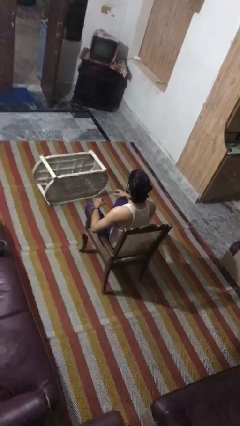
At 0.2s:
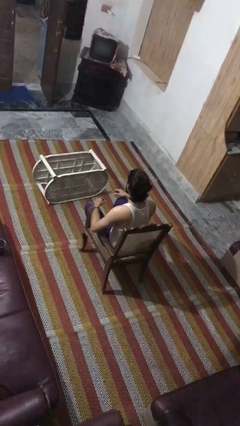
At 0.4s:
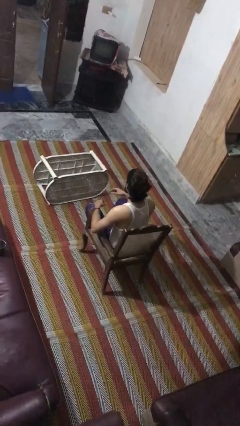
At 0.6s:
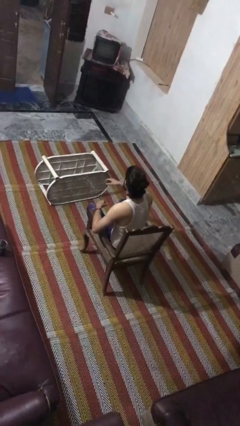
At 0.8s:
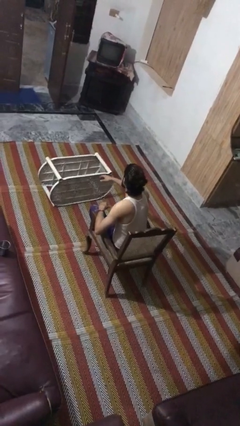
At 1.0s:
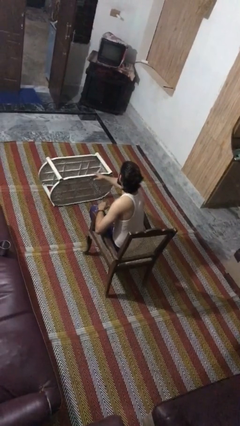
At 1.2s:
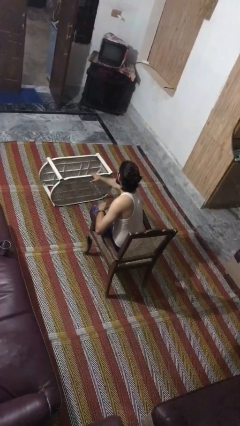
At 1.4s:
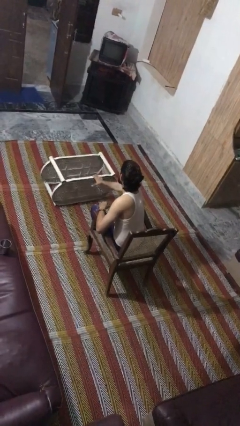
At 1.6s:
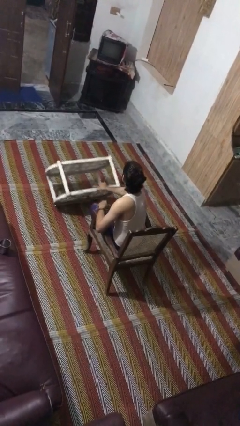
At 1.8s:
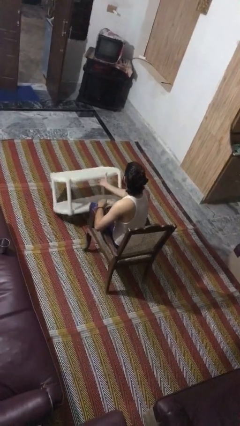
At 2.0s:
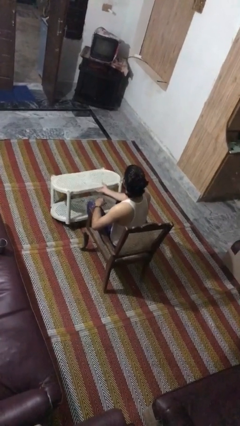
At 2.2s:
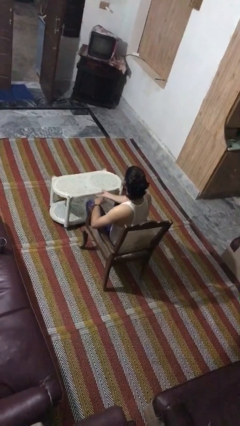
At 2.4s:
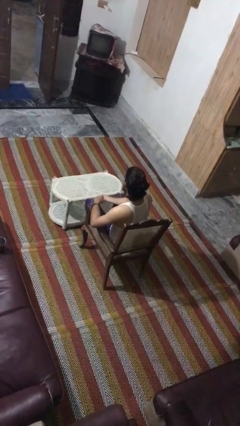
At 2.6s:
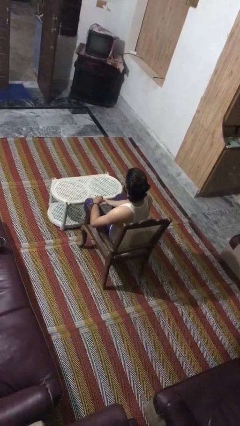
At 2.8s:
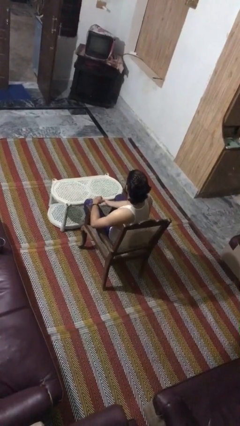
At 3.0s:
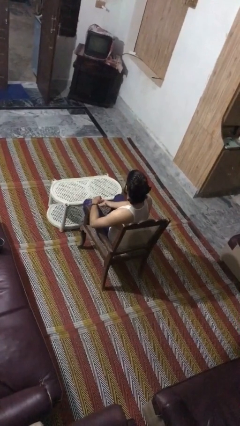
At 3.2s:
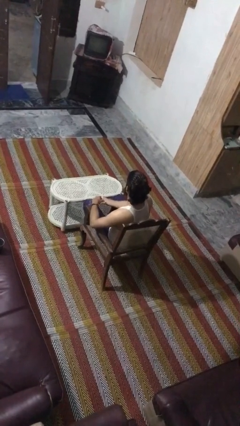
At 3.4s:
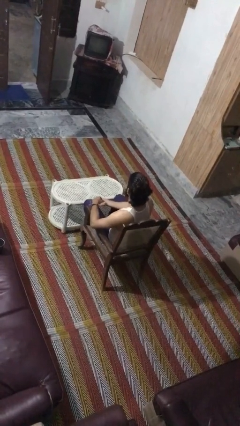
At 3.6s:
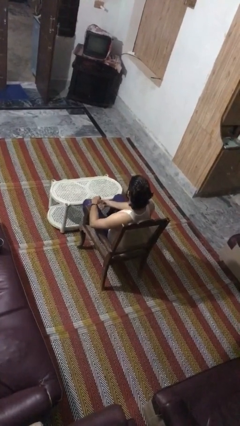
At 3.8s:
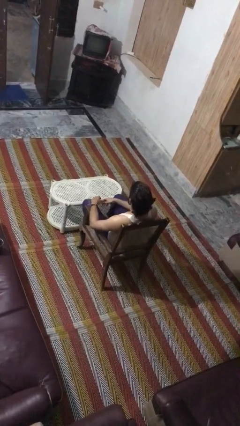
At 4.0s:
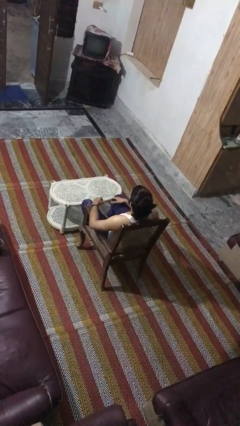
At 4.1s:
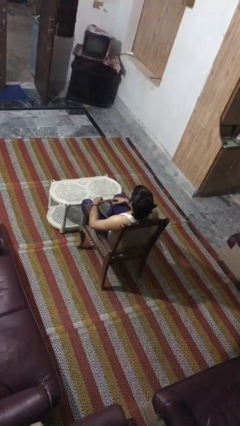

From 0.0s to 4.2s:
person sets upright furniture

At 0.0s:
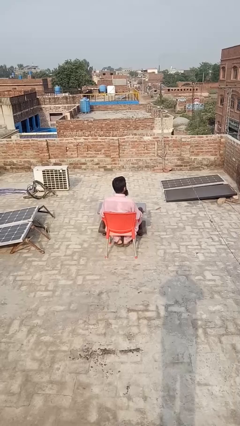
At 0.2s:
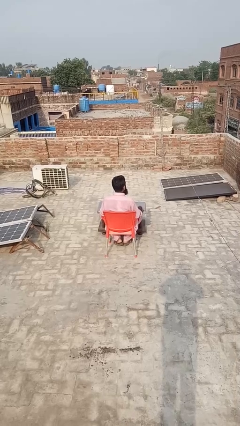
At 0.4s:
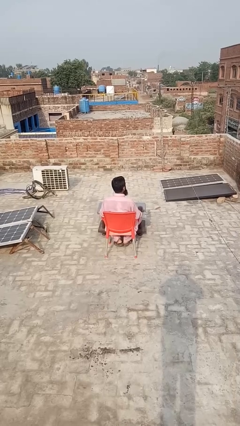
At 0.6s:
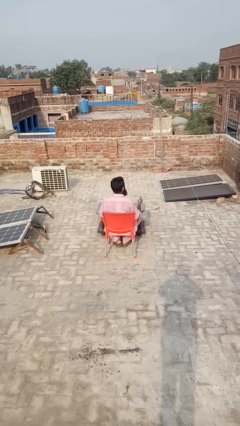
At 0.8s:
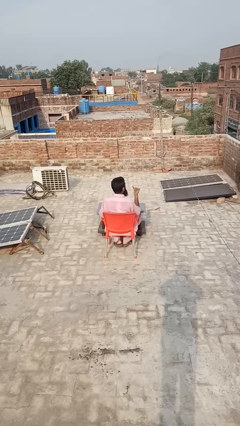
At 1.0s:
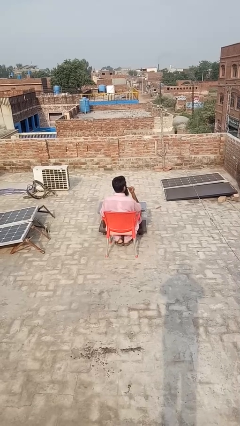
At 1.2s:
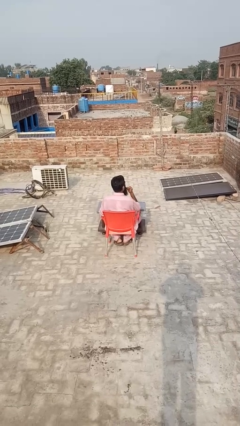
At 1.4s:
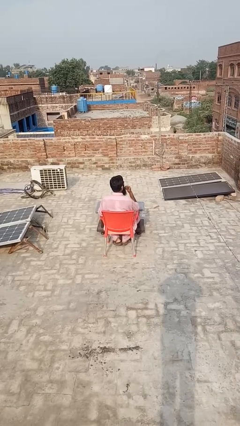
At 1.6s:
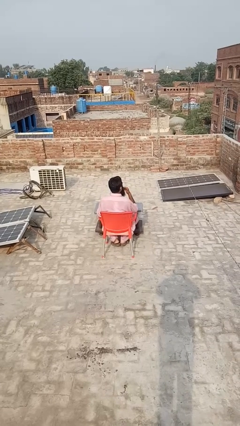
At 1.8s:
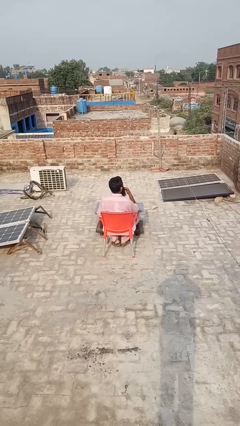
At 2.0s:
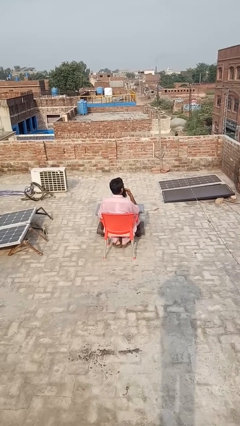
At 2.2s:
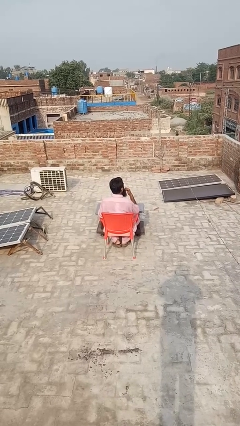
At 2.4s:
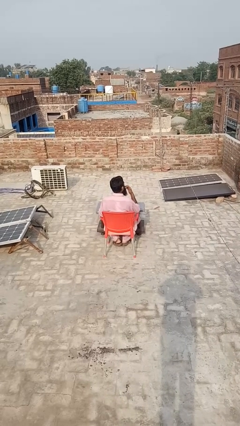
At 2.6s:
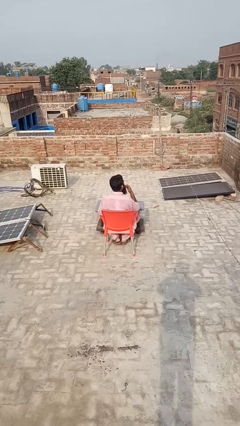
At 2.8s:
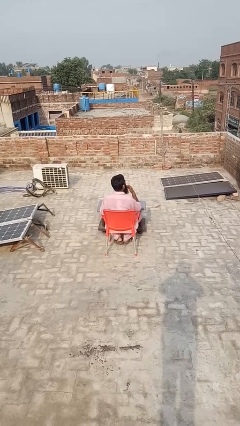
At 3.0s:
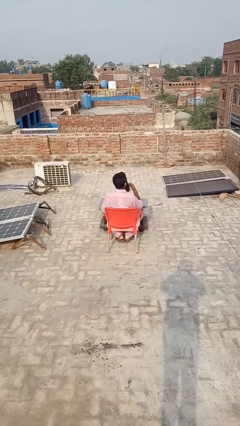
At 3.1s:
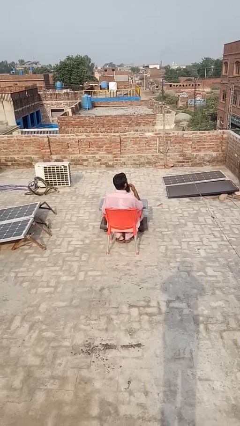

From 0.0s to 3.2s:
person licks fingers

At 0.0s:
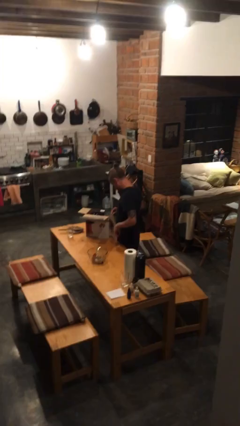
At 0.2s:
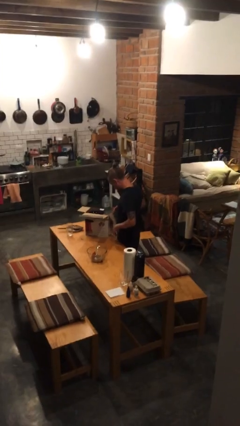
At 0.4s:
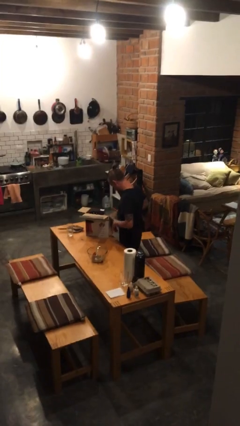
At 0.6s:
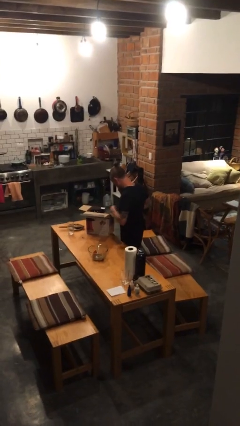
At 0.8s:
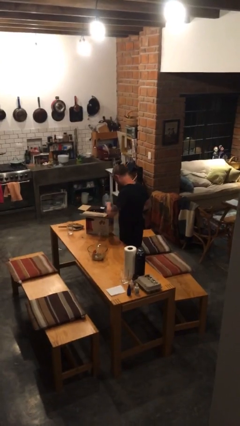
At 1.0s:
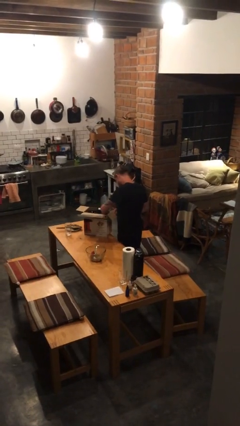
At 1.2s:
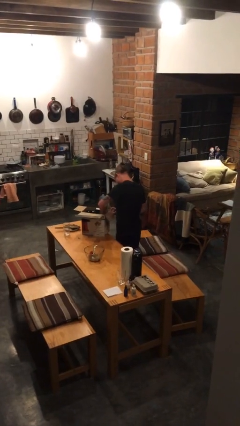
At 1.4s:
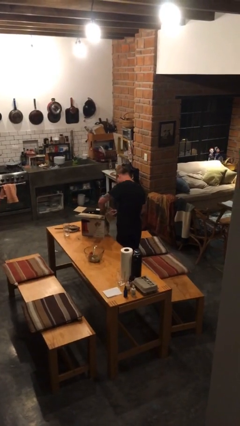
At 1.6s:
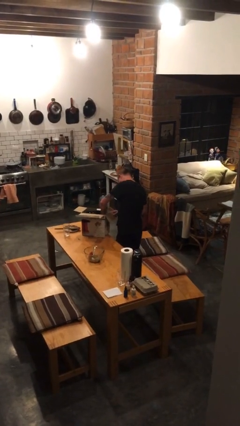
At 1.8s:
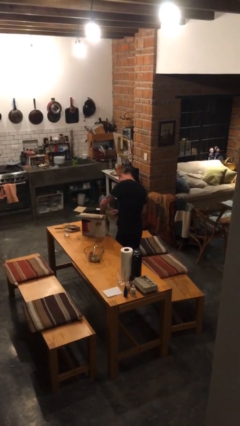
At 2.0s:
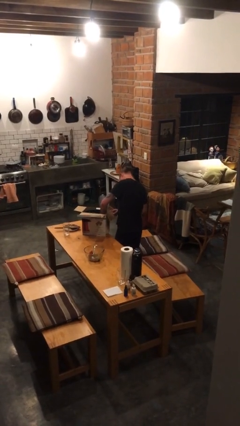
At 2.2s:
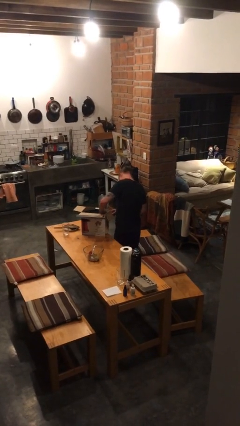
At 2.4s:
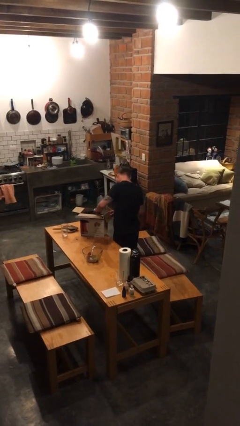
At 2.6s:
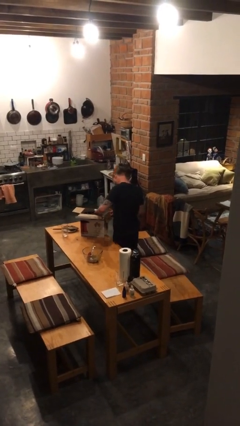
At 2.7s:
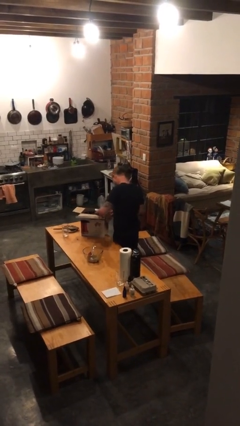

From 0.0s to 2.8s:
person searches in box

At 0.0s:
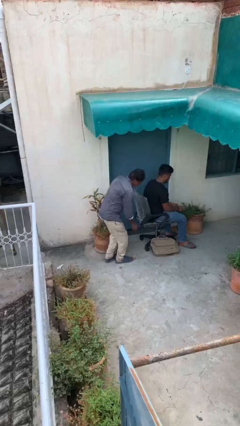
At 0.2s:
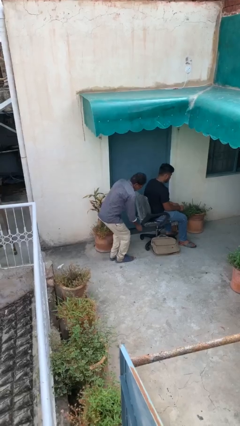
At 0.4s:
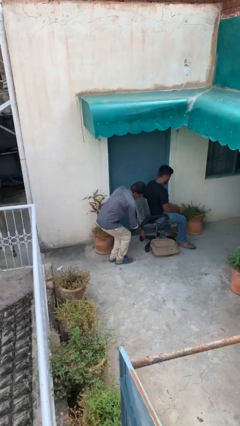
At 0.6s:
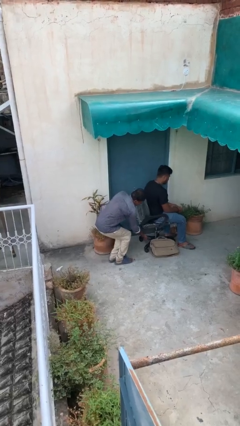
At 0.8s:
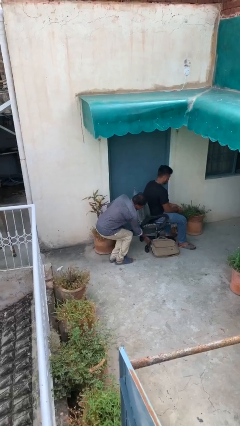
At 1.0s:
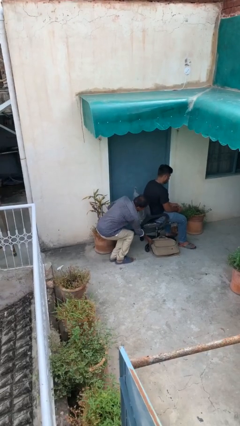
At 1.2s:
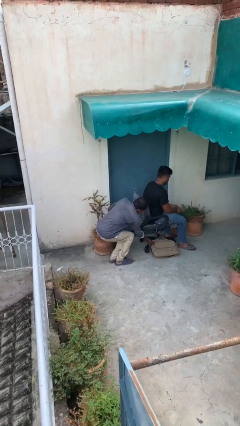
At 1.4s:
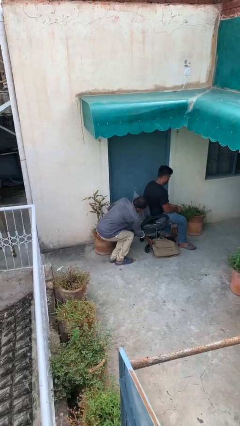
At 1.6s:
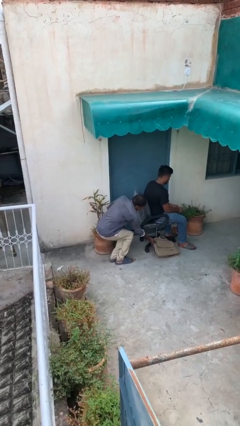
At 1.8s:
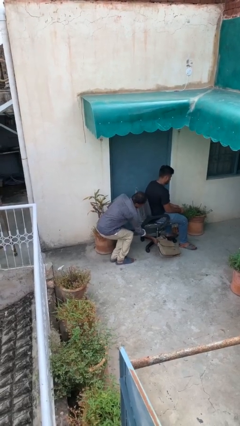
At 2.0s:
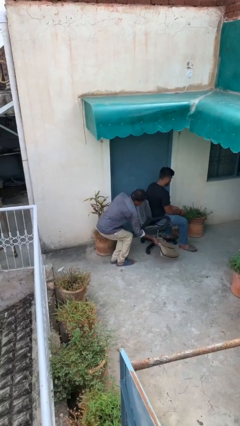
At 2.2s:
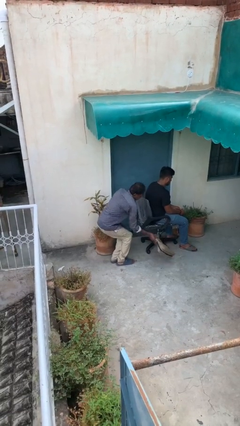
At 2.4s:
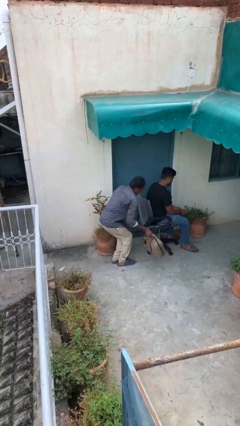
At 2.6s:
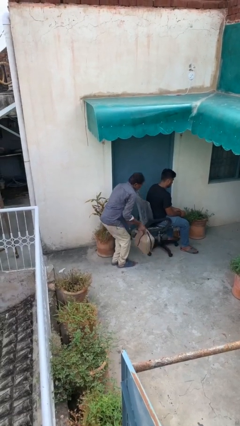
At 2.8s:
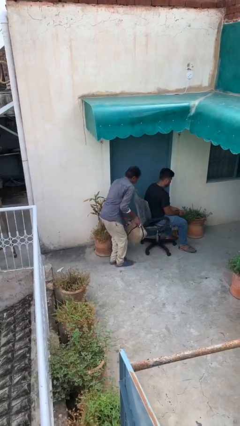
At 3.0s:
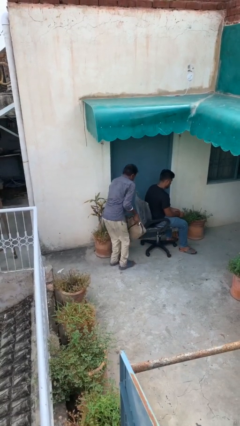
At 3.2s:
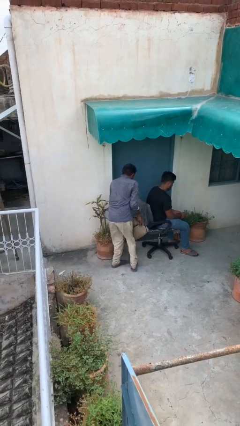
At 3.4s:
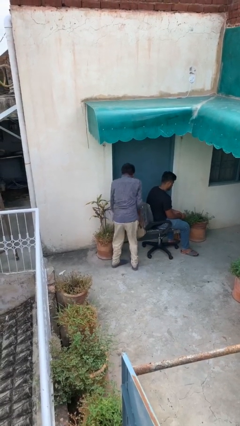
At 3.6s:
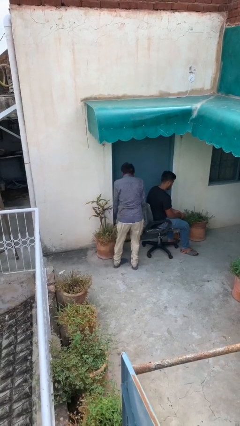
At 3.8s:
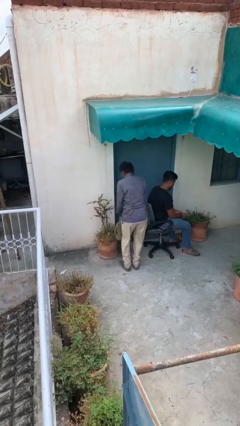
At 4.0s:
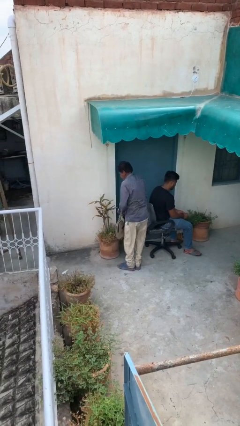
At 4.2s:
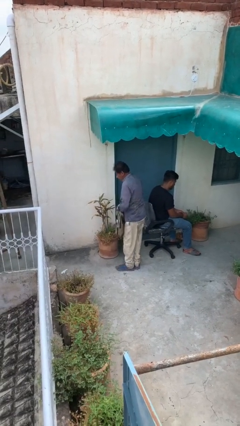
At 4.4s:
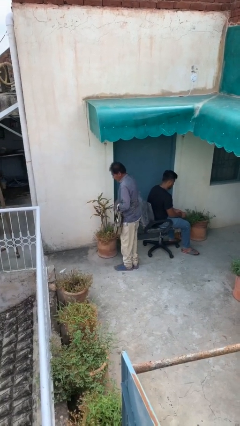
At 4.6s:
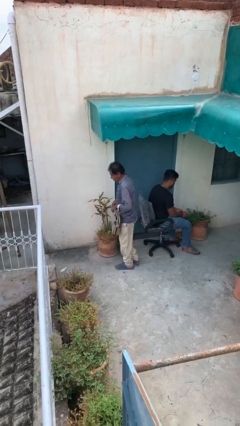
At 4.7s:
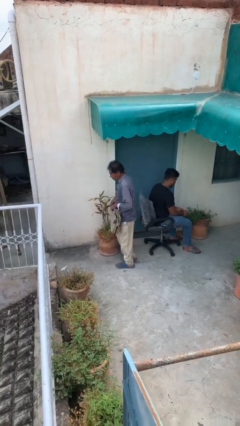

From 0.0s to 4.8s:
person steals object from person

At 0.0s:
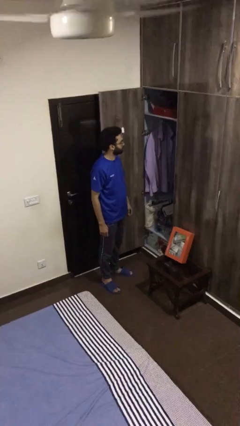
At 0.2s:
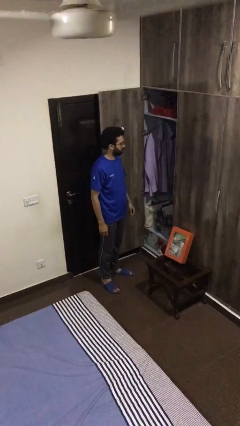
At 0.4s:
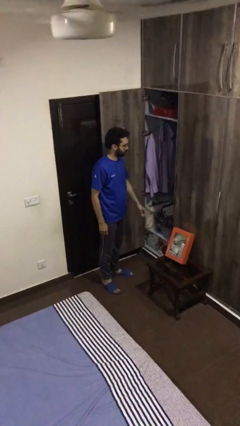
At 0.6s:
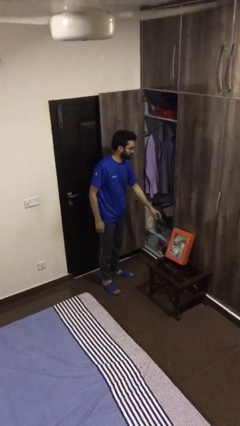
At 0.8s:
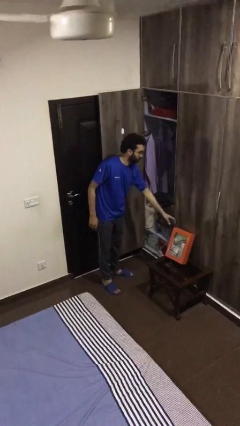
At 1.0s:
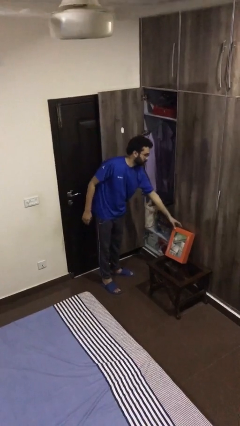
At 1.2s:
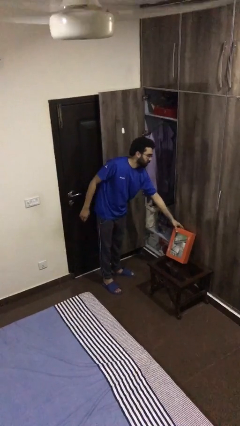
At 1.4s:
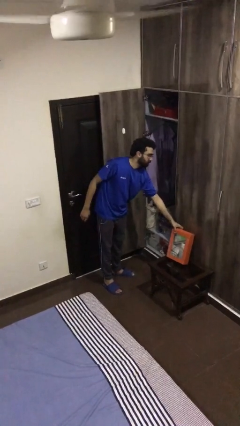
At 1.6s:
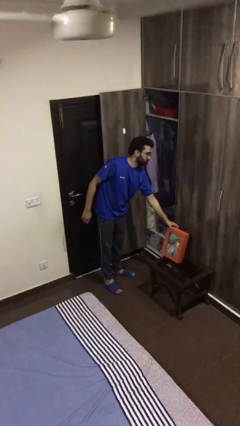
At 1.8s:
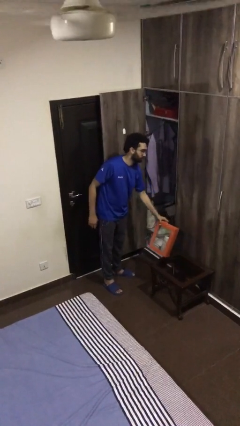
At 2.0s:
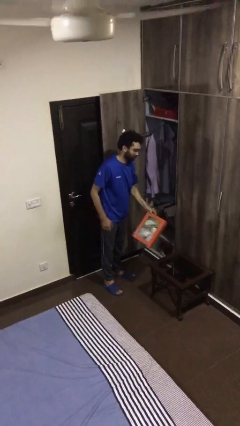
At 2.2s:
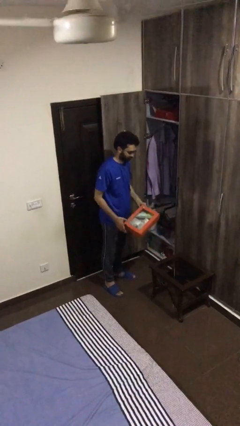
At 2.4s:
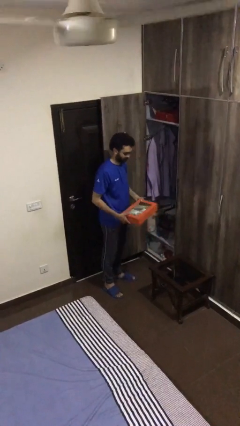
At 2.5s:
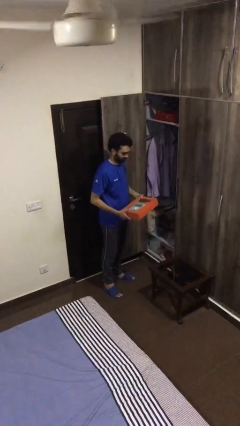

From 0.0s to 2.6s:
person picks up object from table
